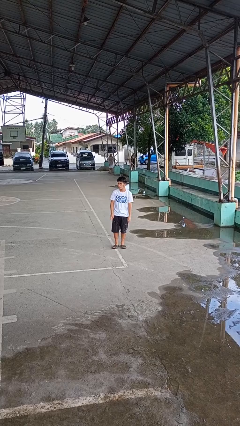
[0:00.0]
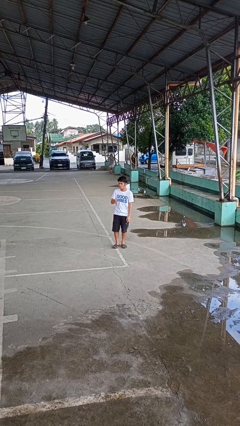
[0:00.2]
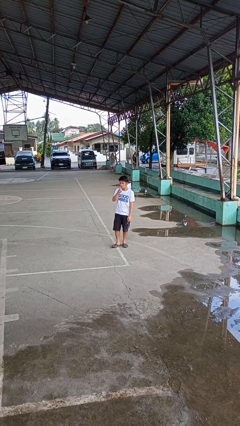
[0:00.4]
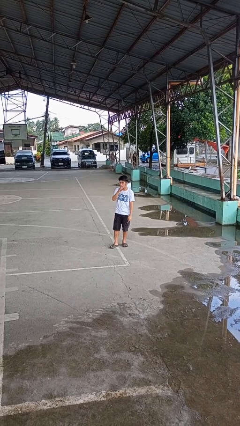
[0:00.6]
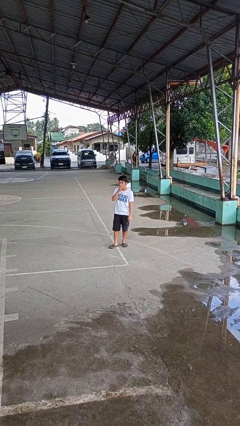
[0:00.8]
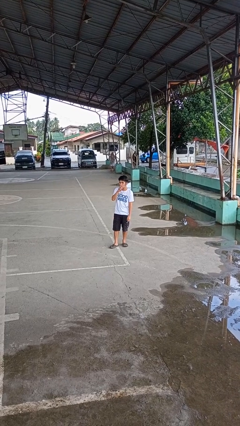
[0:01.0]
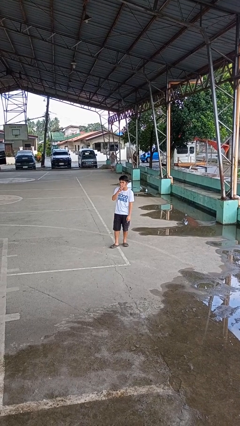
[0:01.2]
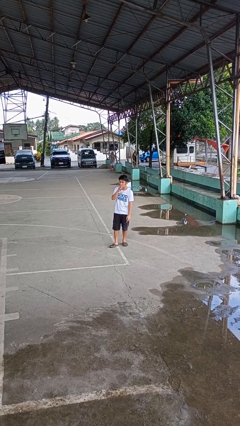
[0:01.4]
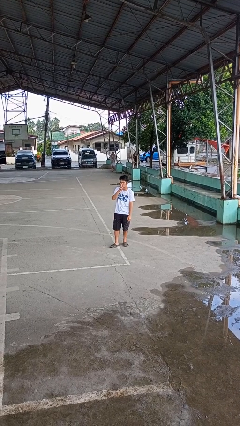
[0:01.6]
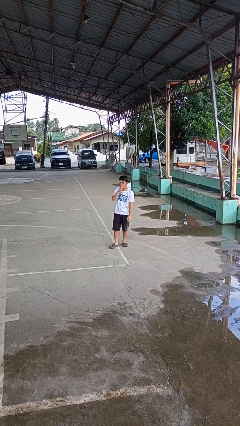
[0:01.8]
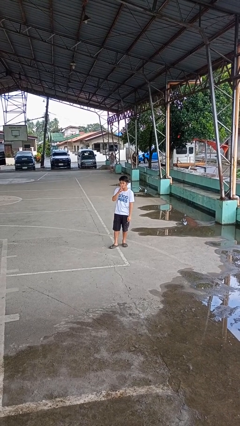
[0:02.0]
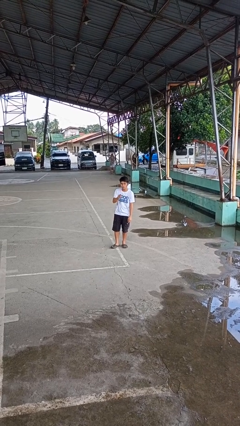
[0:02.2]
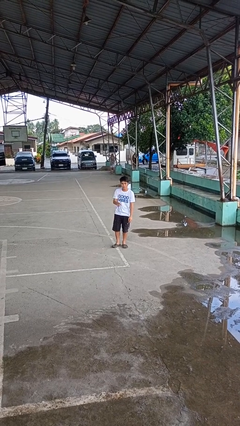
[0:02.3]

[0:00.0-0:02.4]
person gestures be quiet

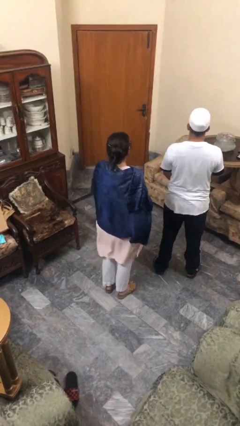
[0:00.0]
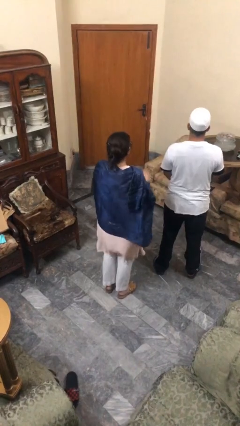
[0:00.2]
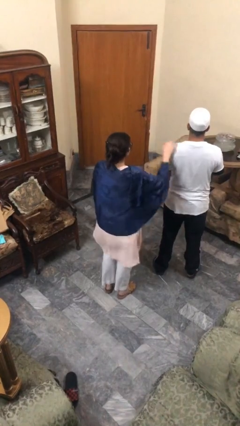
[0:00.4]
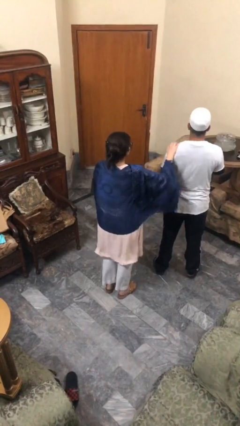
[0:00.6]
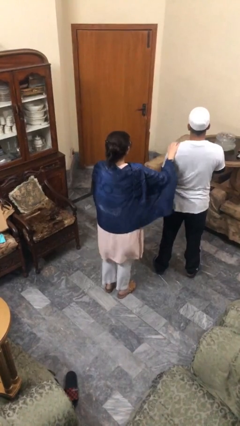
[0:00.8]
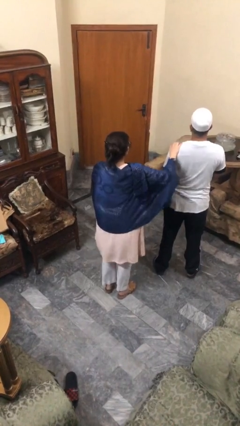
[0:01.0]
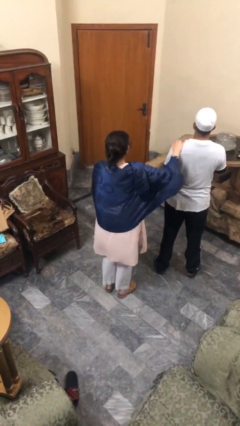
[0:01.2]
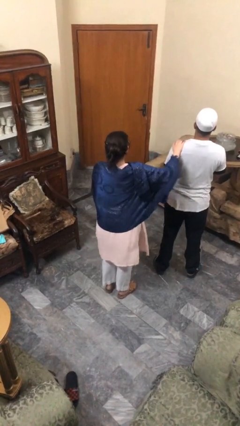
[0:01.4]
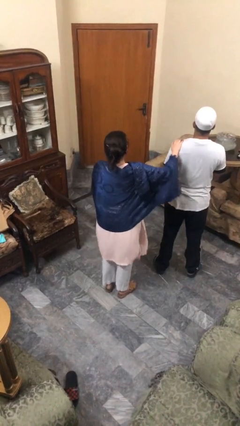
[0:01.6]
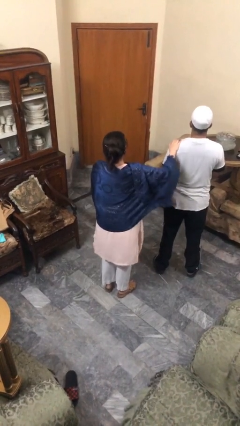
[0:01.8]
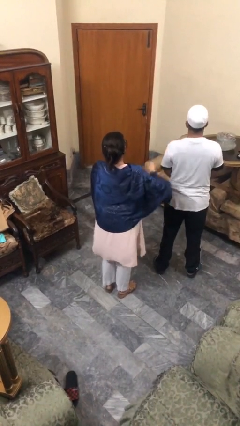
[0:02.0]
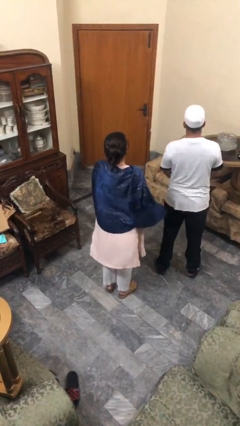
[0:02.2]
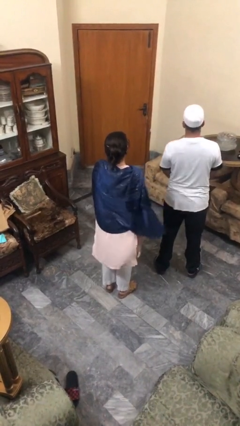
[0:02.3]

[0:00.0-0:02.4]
person pounds shoulders of person

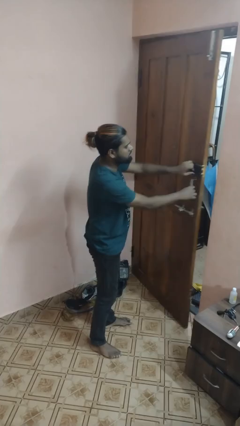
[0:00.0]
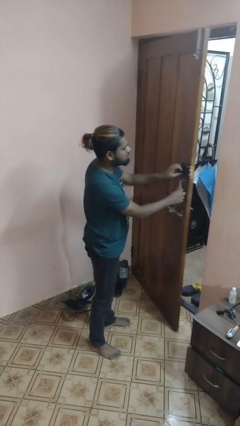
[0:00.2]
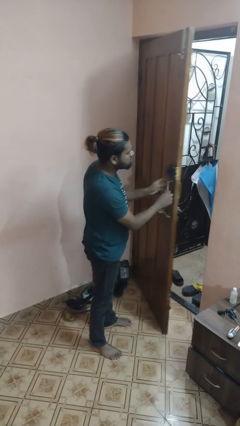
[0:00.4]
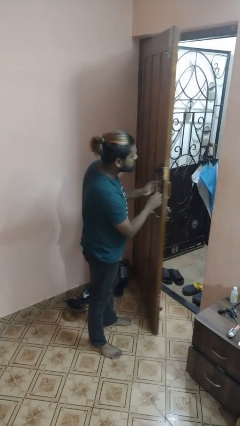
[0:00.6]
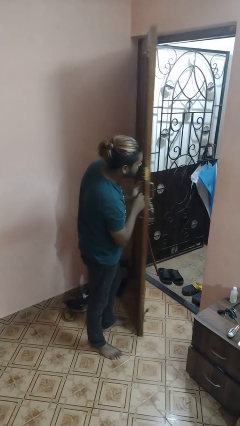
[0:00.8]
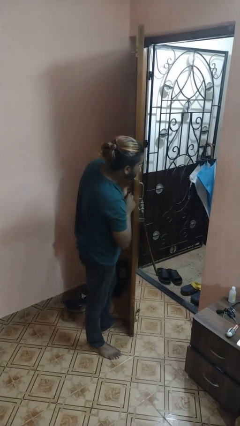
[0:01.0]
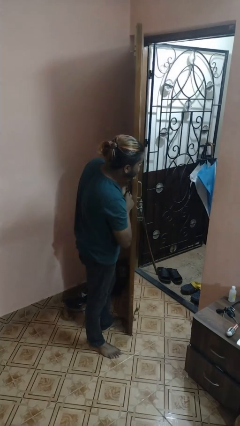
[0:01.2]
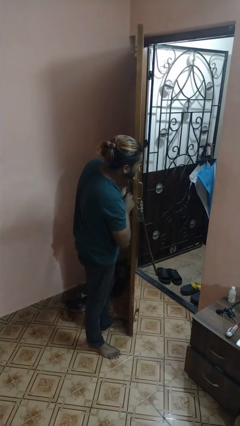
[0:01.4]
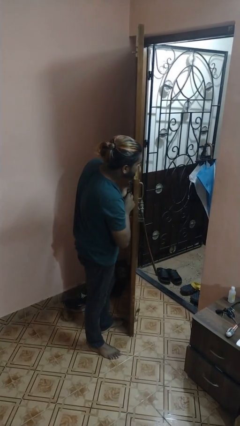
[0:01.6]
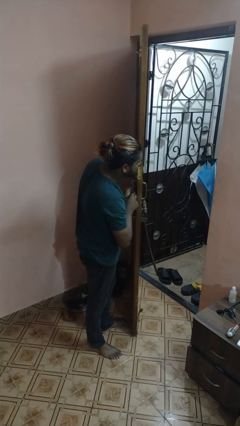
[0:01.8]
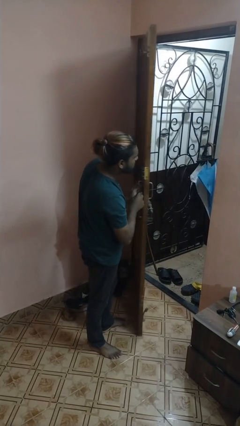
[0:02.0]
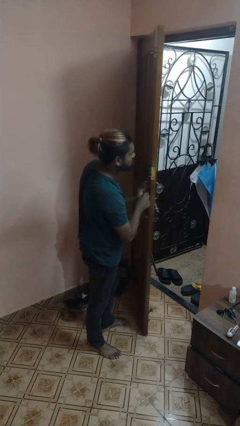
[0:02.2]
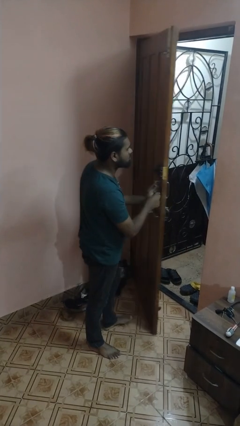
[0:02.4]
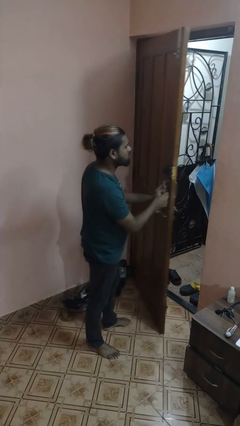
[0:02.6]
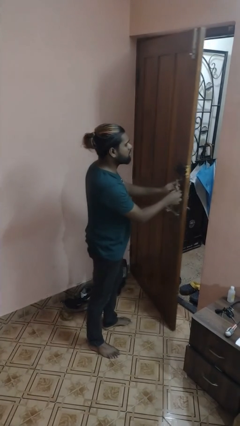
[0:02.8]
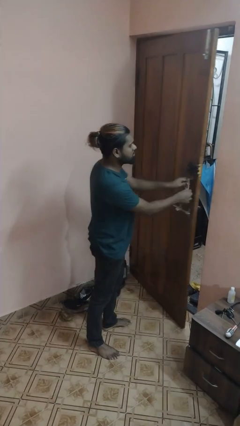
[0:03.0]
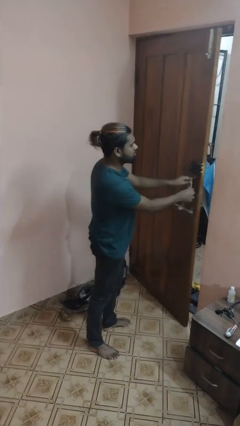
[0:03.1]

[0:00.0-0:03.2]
person opens facility door

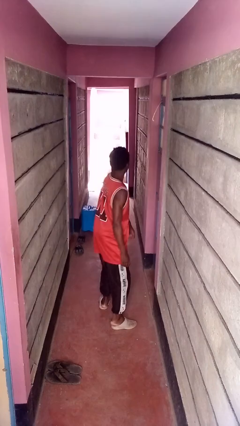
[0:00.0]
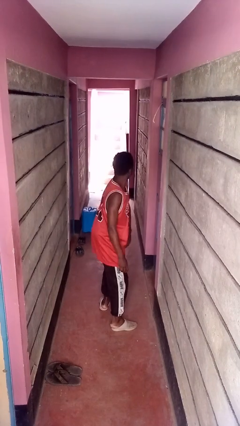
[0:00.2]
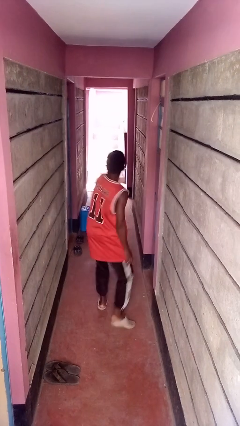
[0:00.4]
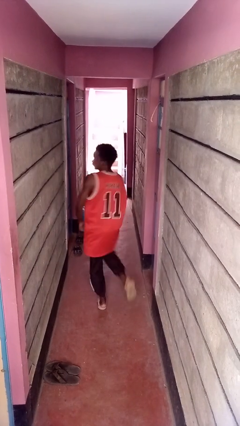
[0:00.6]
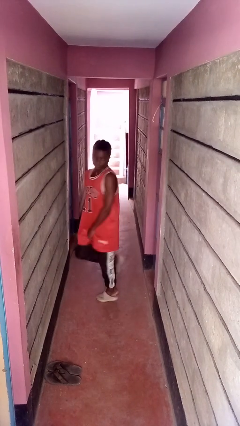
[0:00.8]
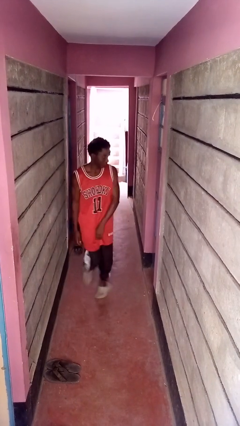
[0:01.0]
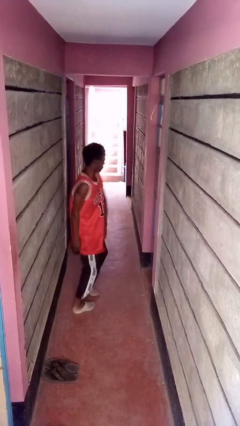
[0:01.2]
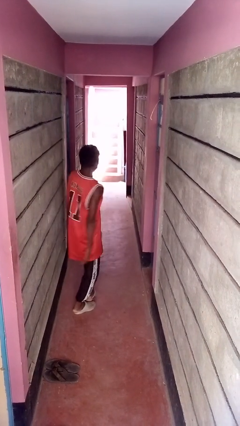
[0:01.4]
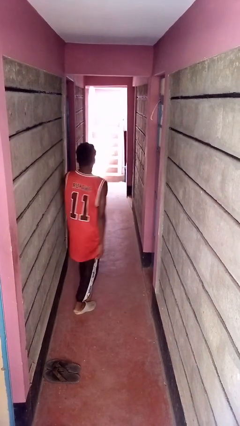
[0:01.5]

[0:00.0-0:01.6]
person twirls

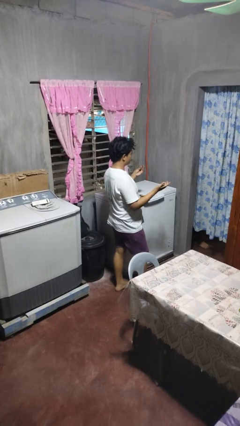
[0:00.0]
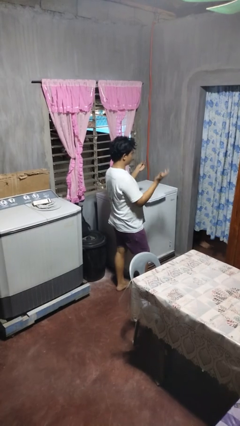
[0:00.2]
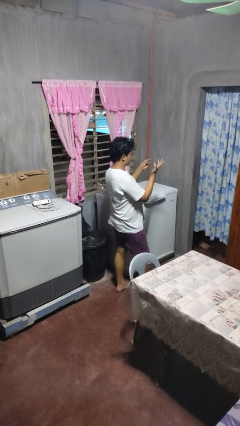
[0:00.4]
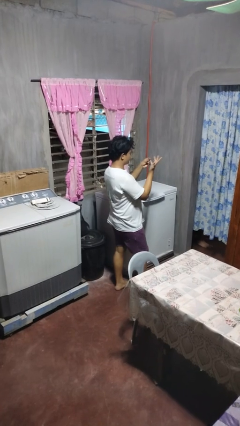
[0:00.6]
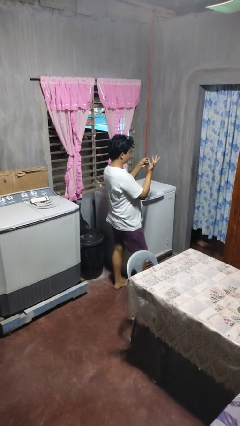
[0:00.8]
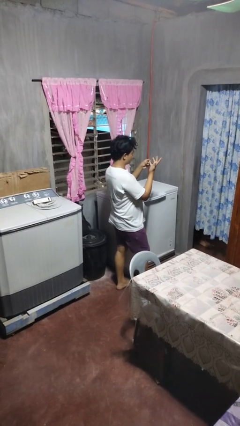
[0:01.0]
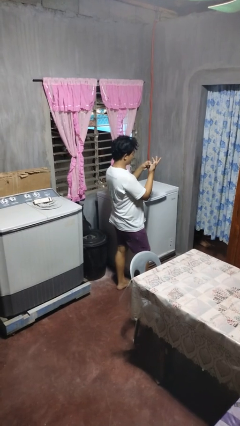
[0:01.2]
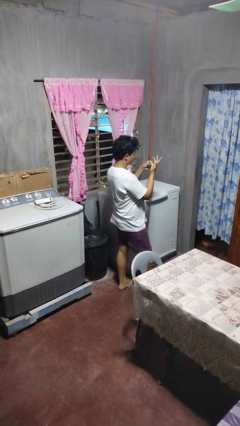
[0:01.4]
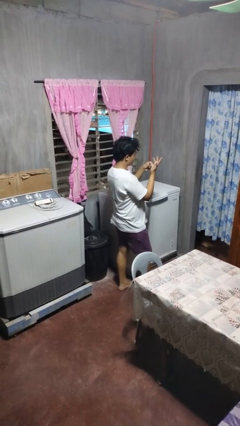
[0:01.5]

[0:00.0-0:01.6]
person puts on ring

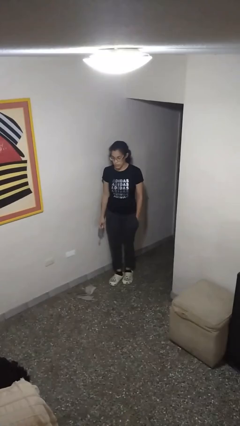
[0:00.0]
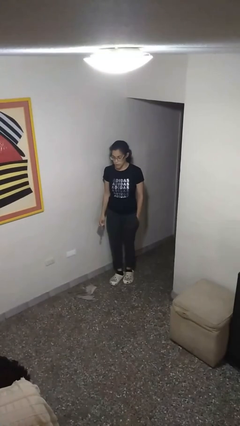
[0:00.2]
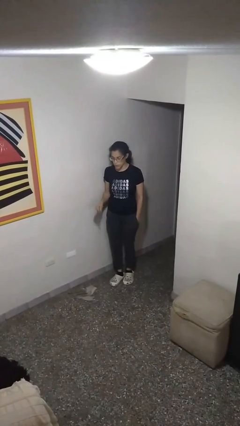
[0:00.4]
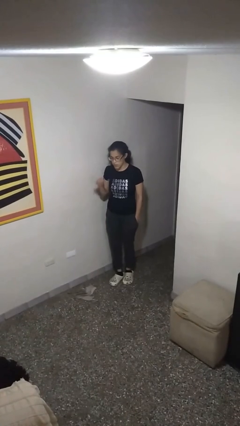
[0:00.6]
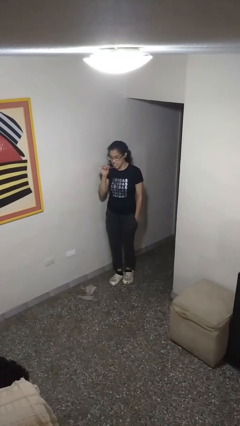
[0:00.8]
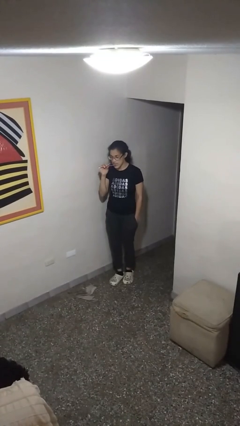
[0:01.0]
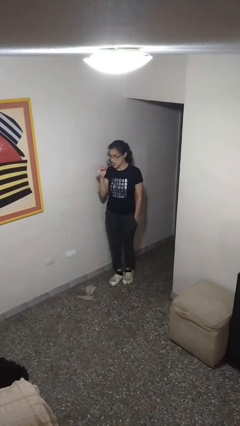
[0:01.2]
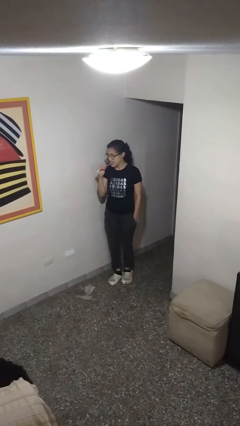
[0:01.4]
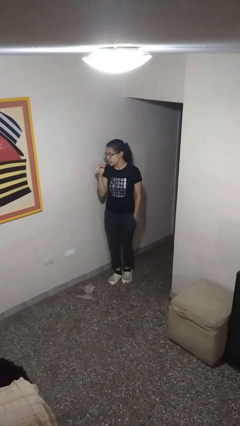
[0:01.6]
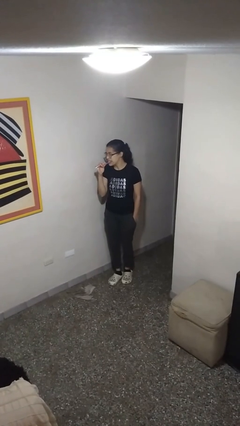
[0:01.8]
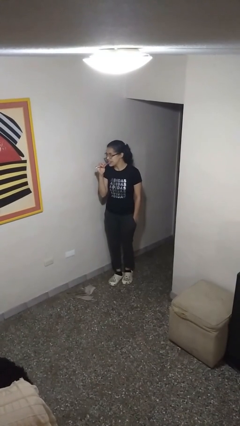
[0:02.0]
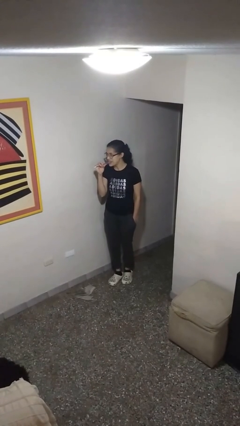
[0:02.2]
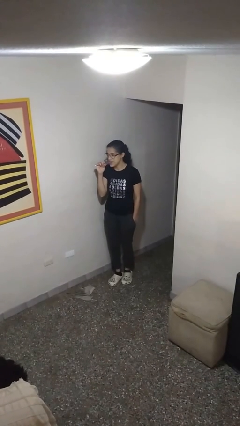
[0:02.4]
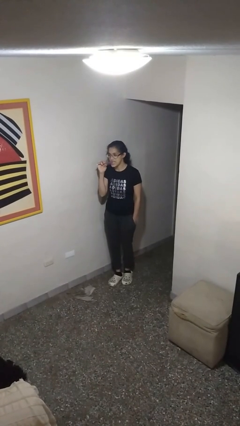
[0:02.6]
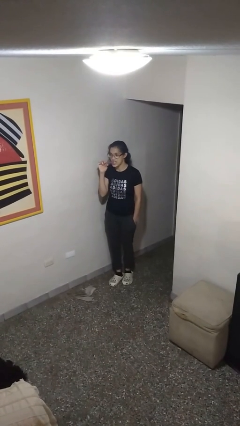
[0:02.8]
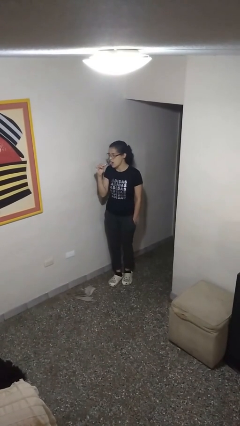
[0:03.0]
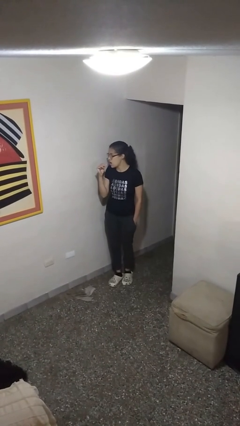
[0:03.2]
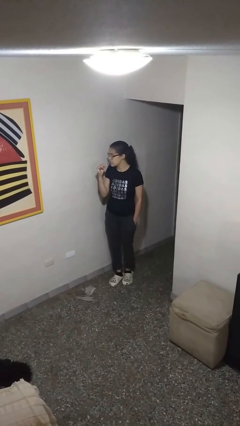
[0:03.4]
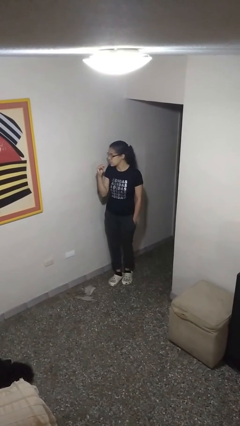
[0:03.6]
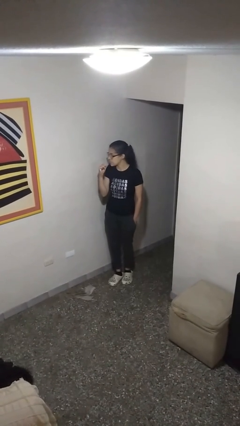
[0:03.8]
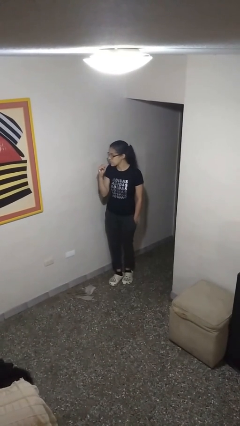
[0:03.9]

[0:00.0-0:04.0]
person brushes teeth

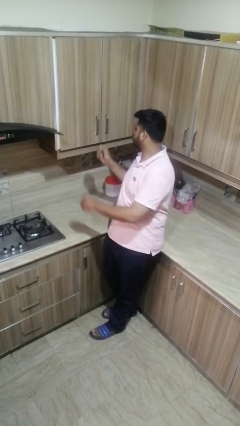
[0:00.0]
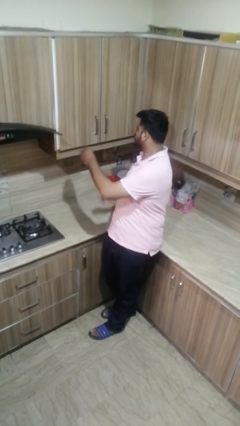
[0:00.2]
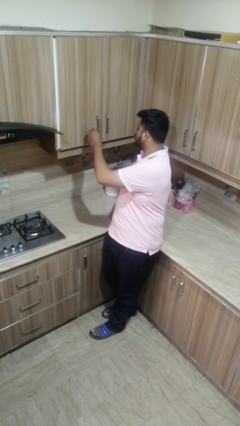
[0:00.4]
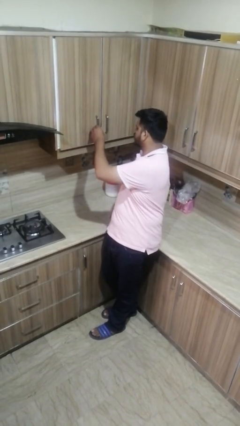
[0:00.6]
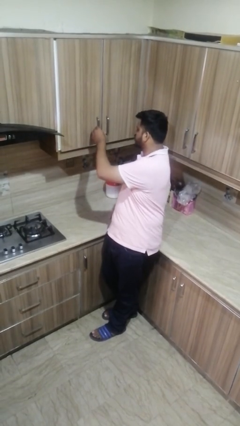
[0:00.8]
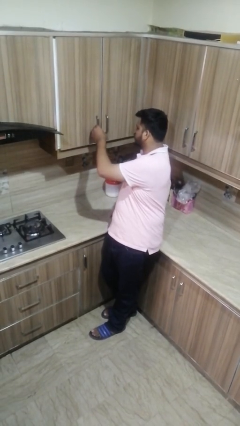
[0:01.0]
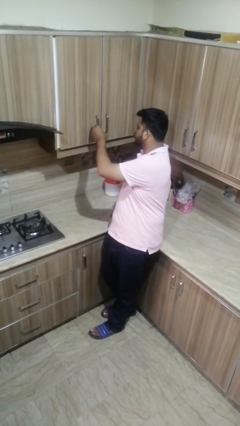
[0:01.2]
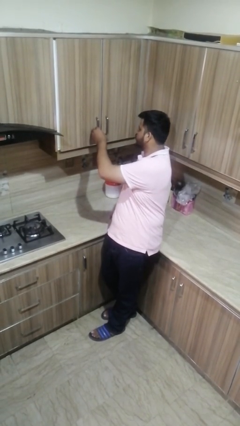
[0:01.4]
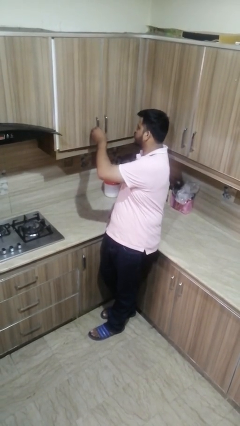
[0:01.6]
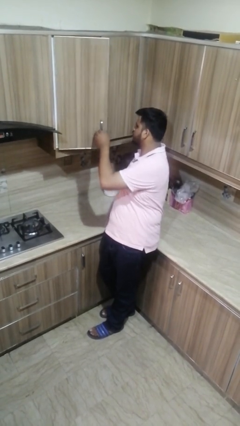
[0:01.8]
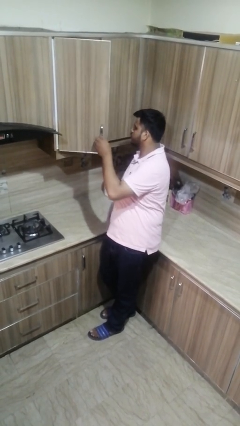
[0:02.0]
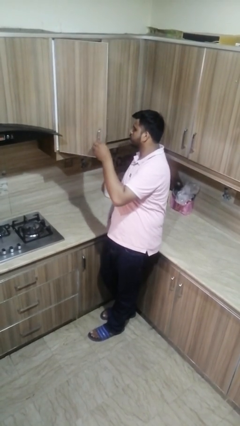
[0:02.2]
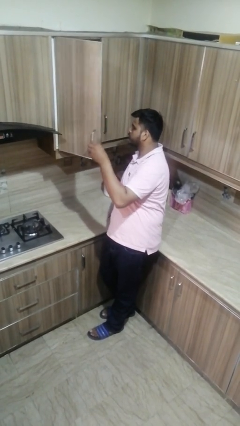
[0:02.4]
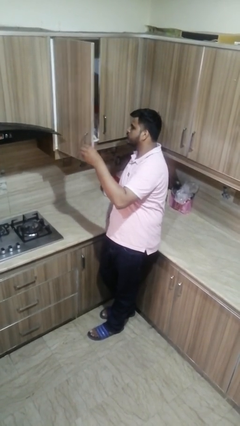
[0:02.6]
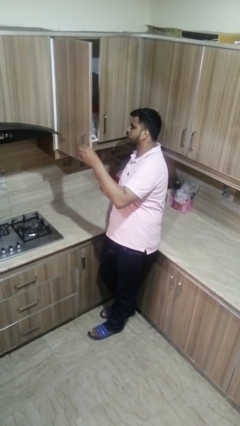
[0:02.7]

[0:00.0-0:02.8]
person opens cabinet
